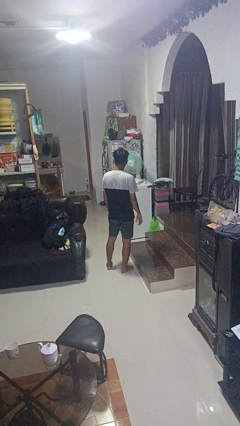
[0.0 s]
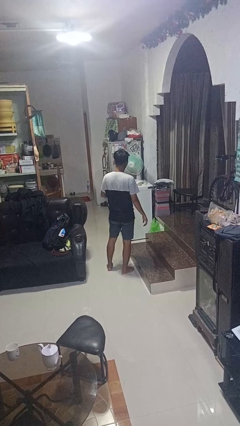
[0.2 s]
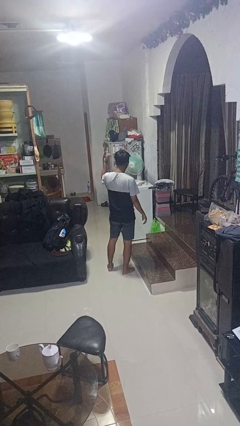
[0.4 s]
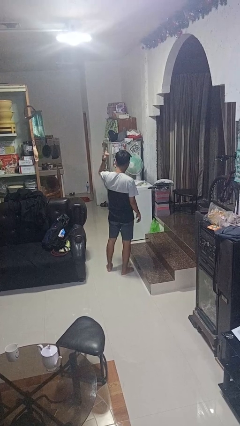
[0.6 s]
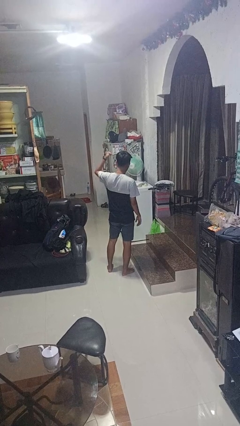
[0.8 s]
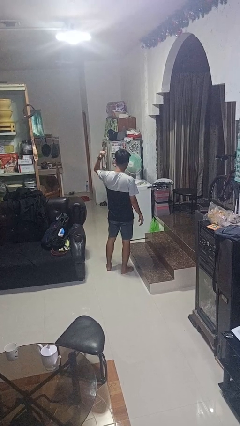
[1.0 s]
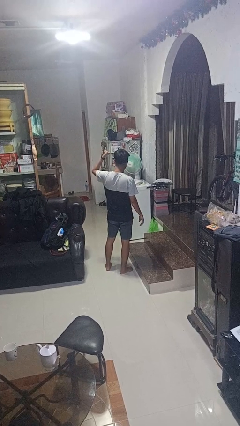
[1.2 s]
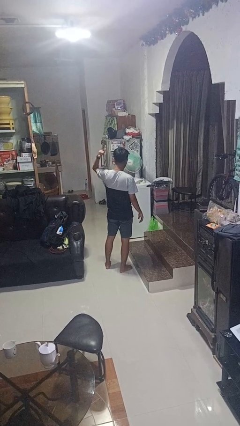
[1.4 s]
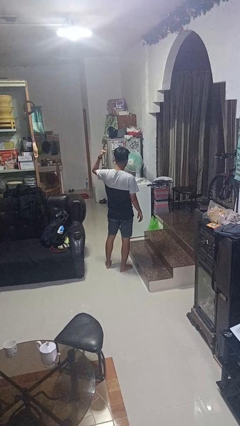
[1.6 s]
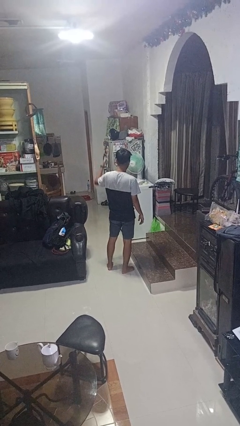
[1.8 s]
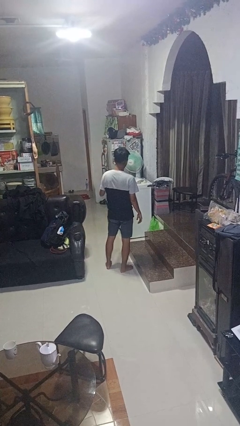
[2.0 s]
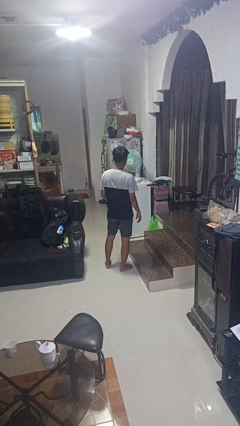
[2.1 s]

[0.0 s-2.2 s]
person gestures behind me

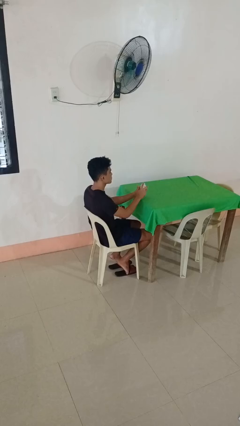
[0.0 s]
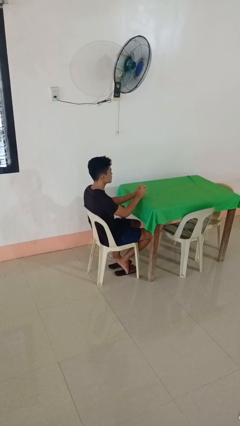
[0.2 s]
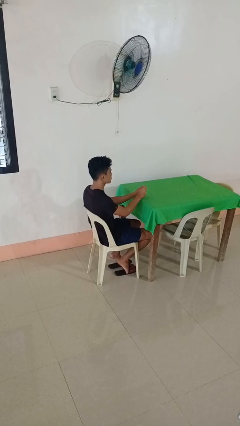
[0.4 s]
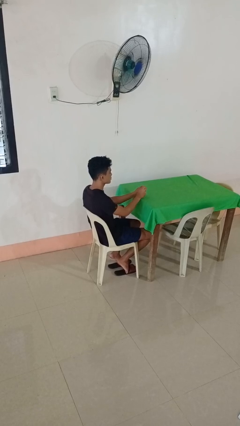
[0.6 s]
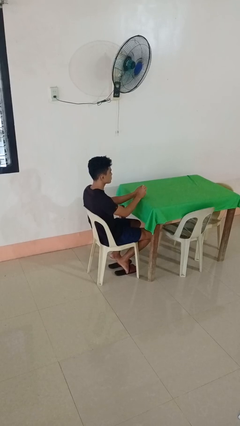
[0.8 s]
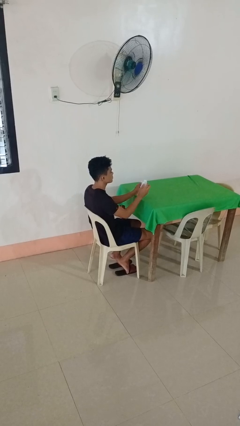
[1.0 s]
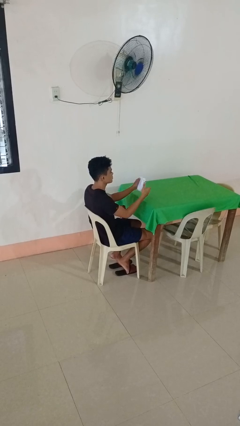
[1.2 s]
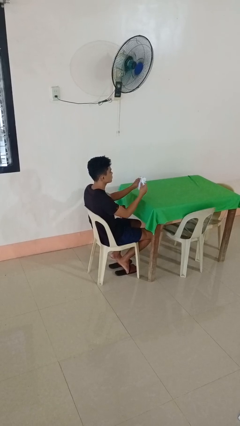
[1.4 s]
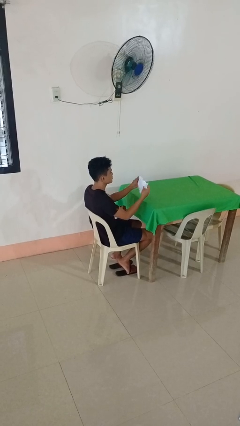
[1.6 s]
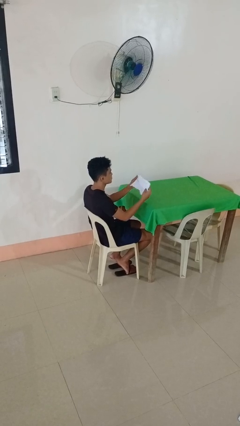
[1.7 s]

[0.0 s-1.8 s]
person crumples paper

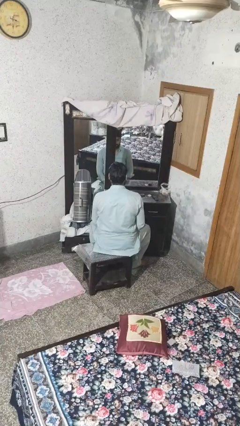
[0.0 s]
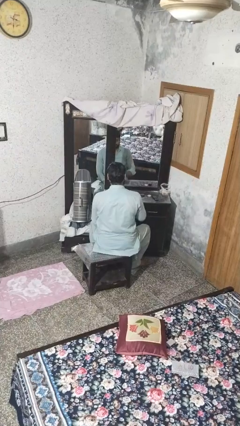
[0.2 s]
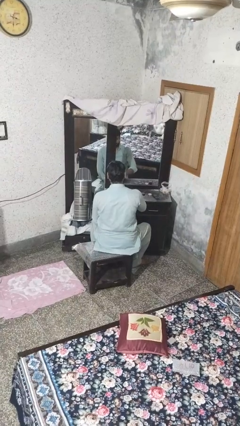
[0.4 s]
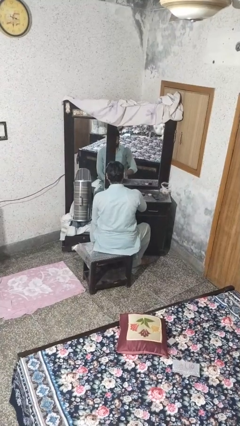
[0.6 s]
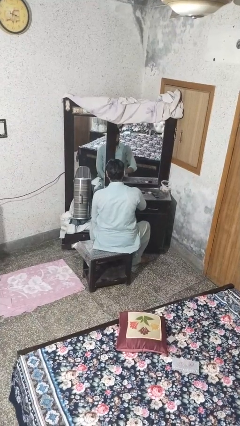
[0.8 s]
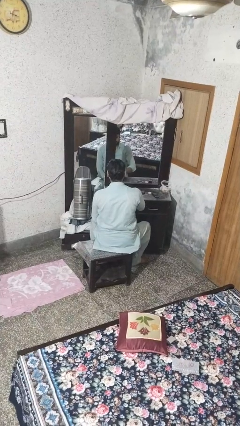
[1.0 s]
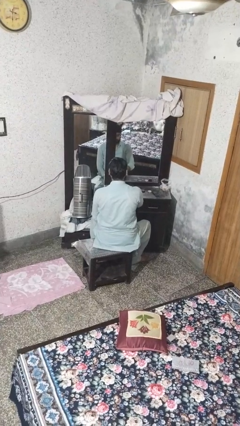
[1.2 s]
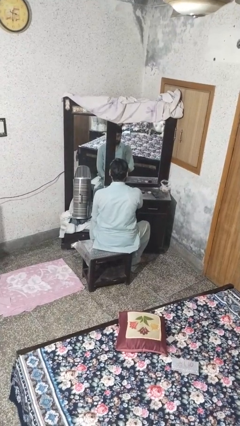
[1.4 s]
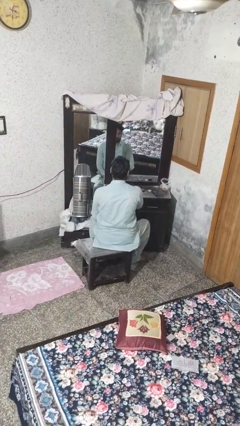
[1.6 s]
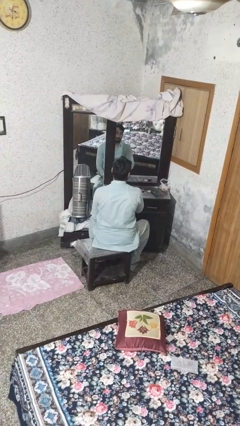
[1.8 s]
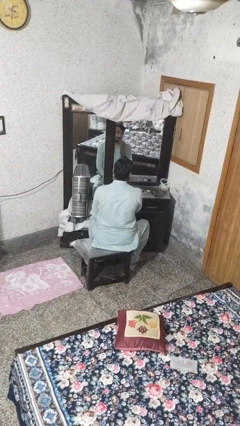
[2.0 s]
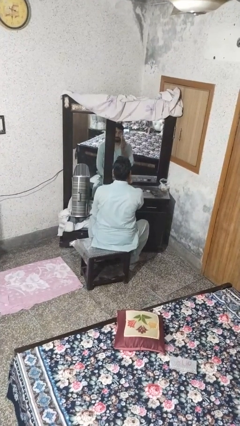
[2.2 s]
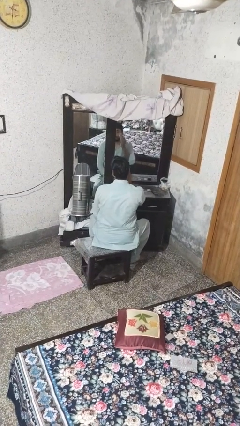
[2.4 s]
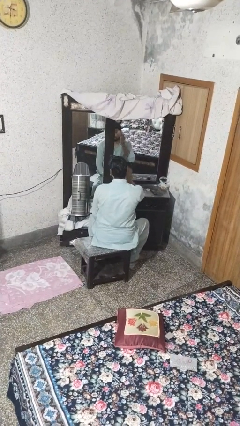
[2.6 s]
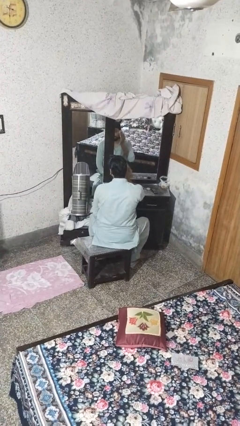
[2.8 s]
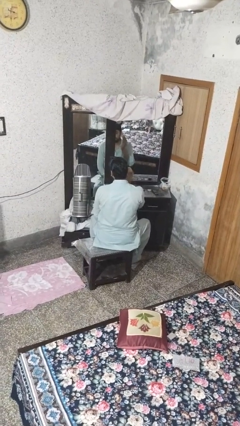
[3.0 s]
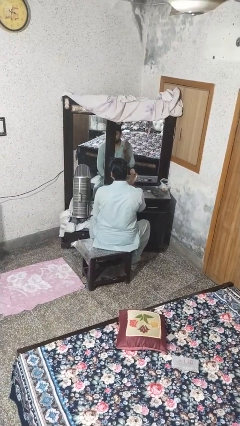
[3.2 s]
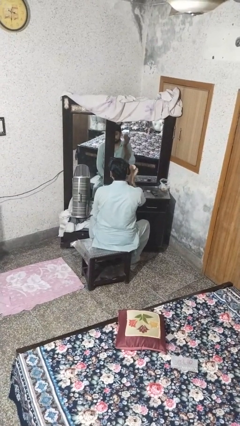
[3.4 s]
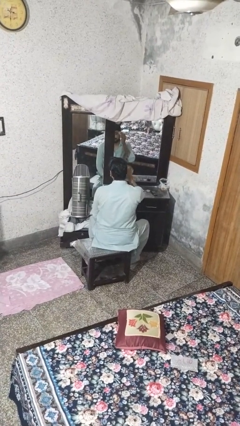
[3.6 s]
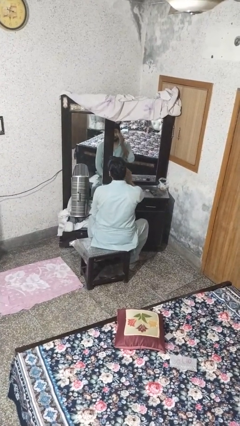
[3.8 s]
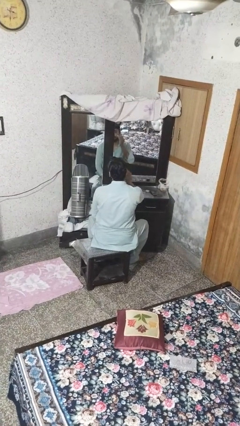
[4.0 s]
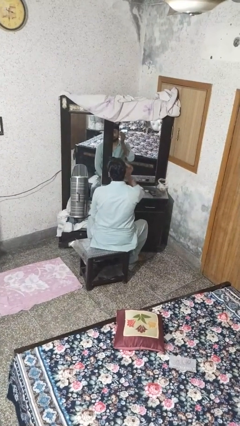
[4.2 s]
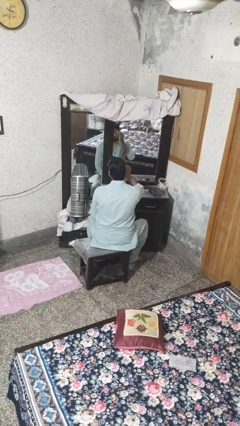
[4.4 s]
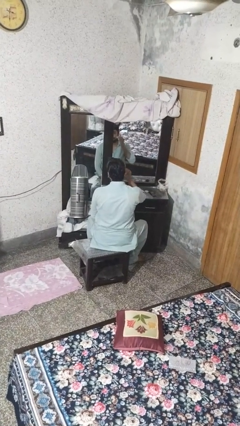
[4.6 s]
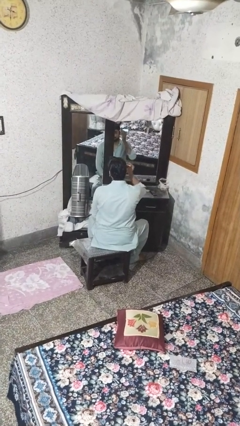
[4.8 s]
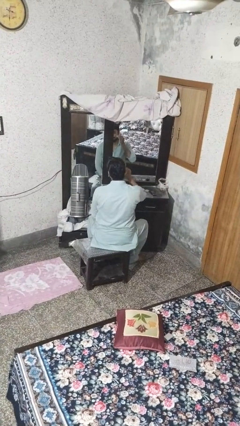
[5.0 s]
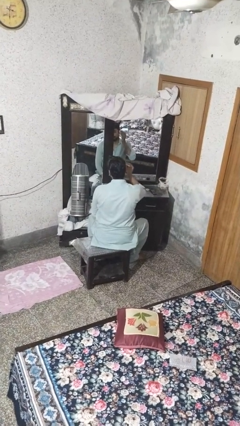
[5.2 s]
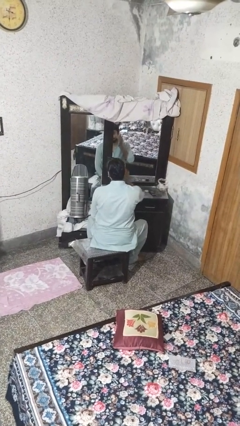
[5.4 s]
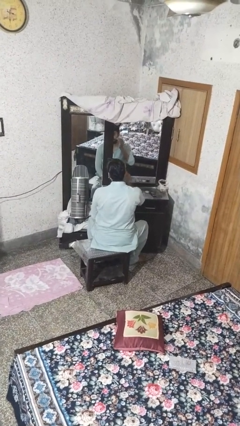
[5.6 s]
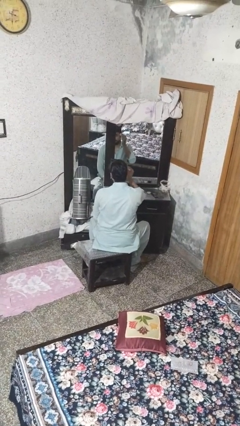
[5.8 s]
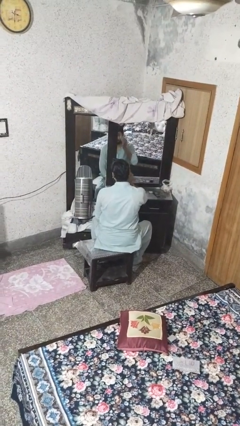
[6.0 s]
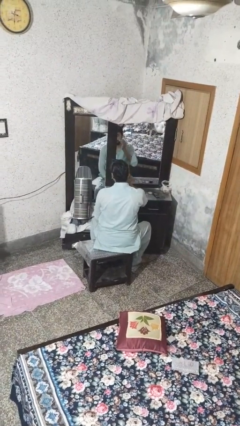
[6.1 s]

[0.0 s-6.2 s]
person applies foundation makeup

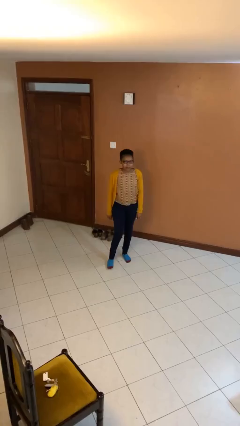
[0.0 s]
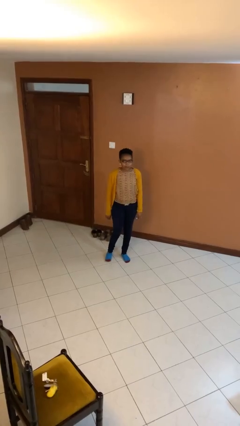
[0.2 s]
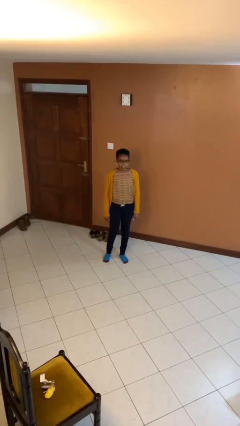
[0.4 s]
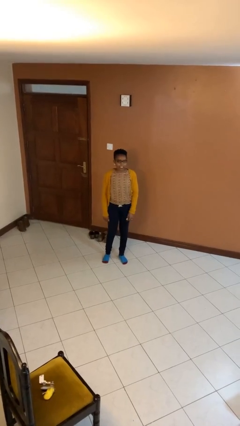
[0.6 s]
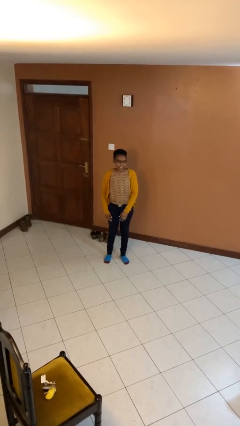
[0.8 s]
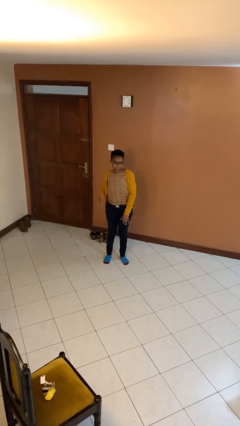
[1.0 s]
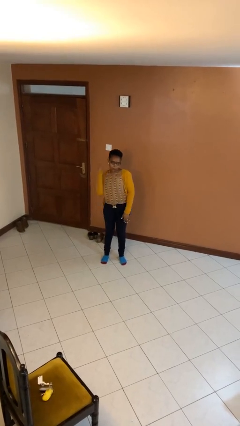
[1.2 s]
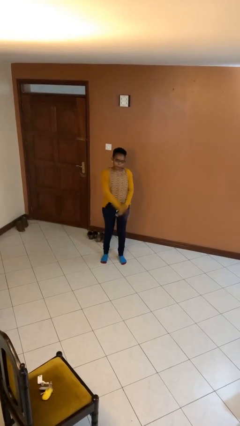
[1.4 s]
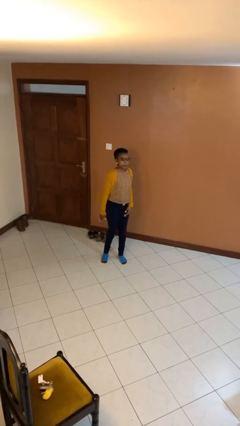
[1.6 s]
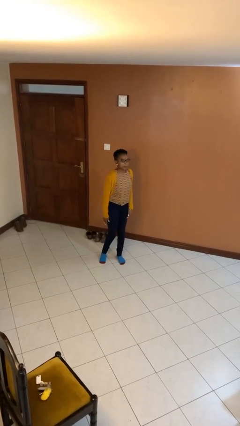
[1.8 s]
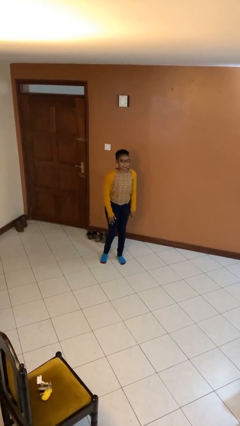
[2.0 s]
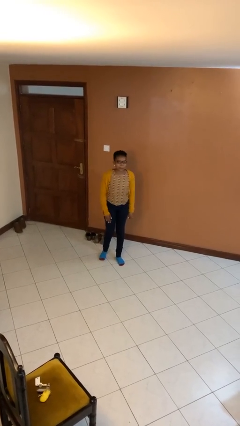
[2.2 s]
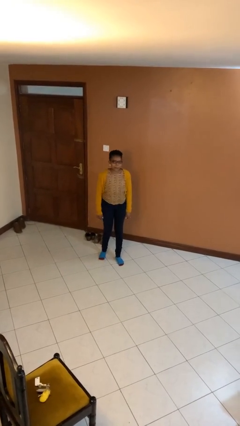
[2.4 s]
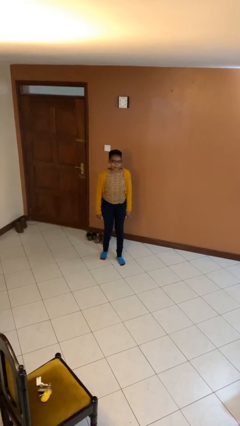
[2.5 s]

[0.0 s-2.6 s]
person karate chop

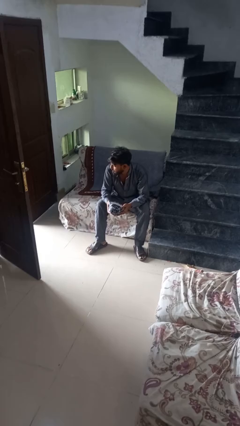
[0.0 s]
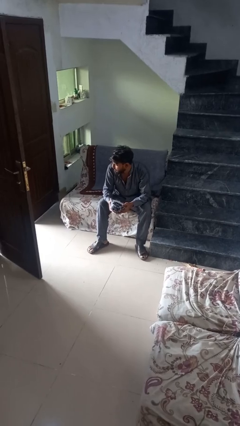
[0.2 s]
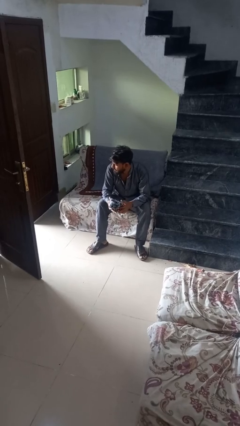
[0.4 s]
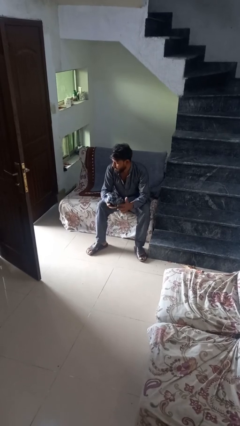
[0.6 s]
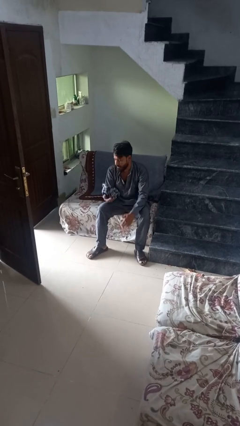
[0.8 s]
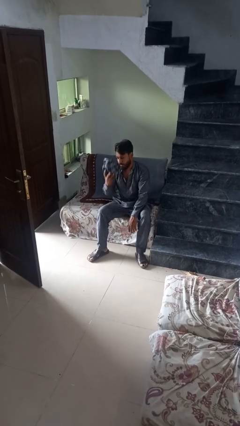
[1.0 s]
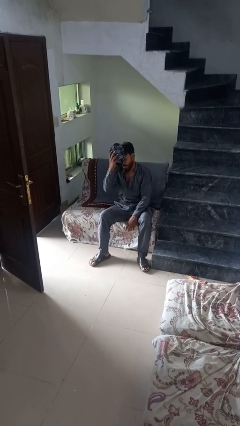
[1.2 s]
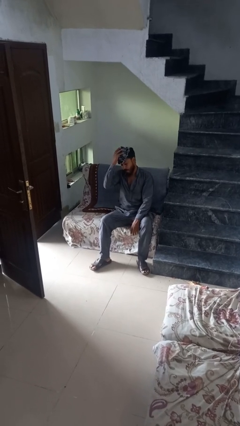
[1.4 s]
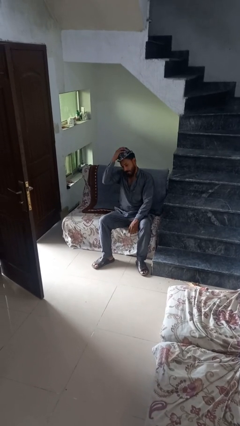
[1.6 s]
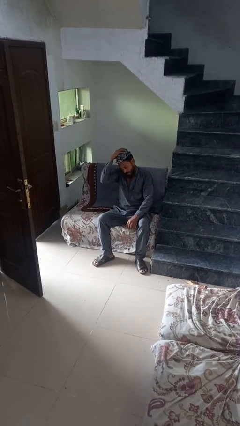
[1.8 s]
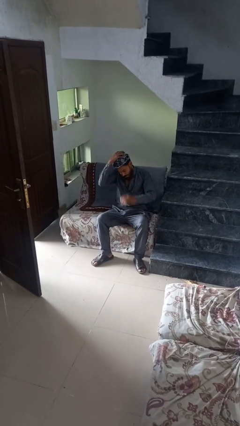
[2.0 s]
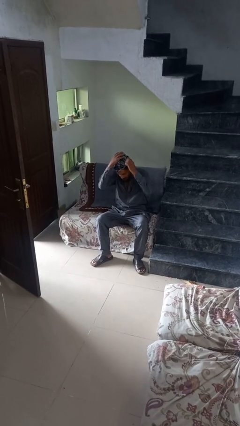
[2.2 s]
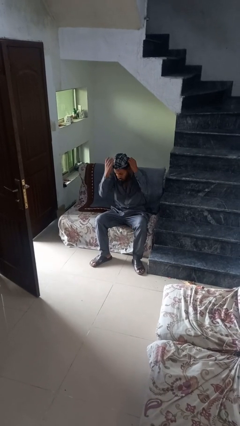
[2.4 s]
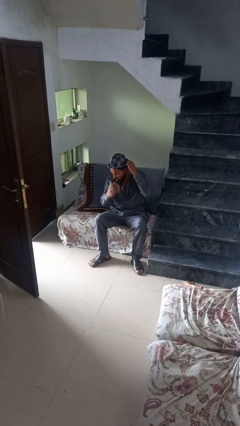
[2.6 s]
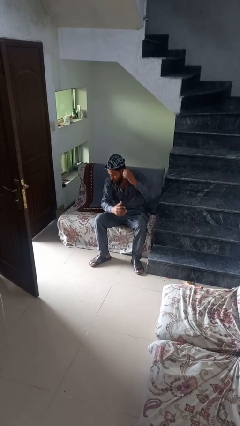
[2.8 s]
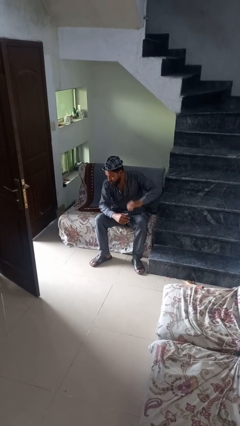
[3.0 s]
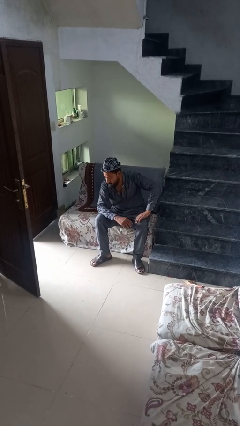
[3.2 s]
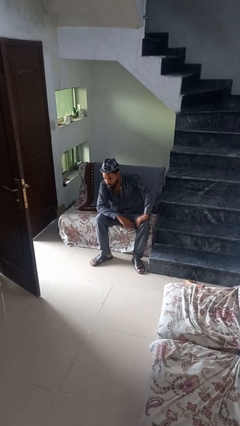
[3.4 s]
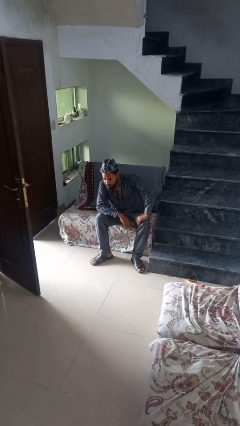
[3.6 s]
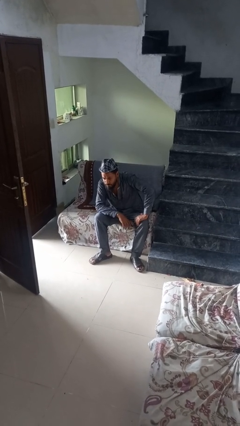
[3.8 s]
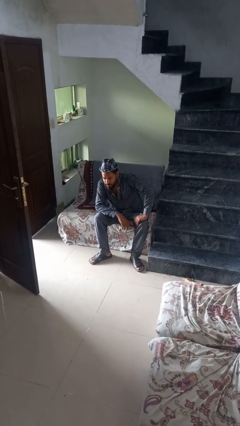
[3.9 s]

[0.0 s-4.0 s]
person puts on hat

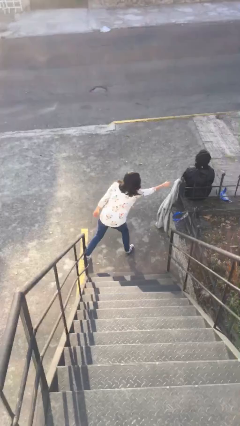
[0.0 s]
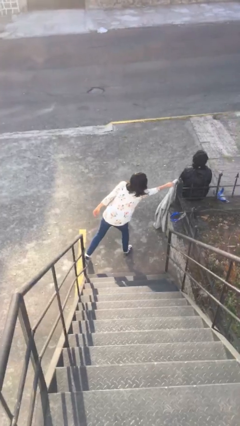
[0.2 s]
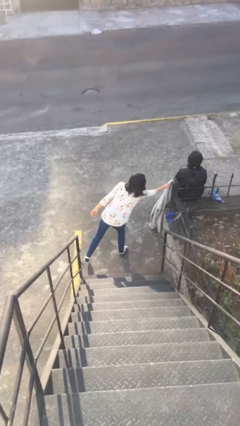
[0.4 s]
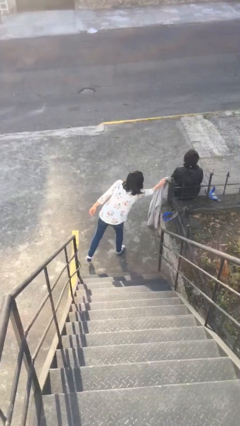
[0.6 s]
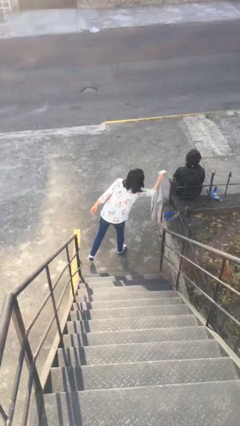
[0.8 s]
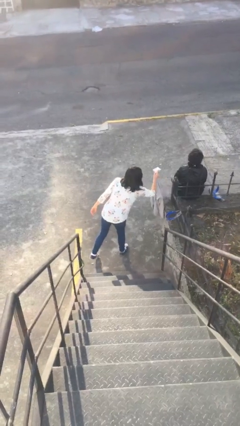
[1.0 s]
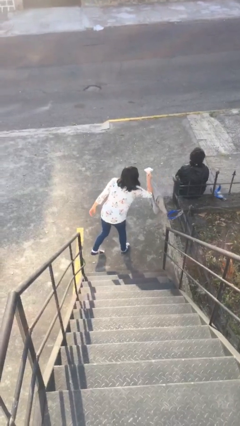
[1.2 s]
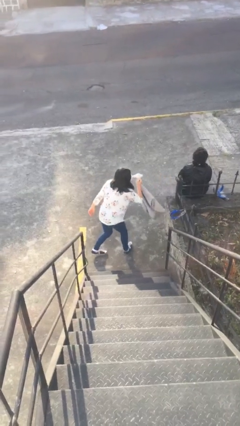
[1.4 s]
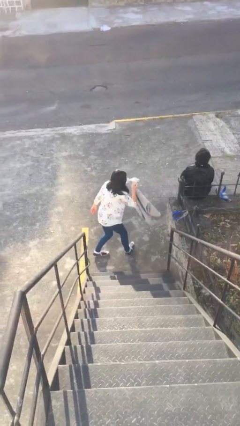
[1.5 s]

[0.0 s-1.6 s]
person steals object from person
